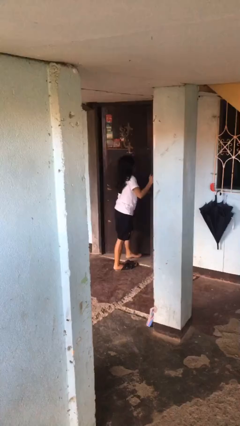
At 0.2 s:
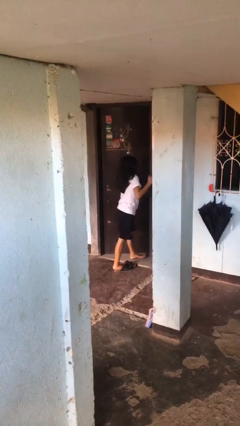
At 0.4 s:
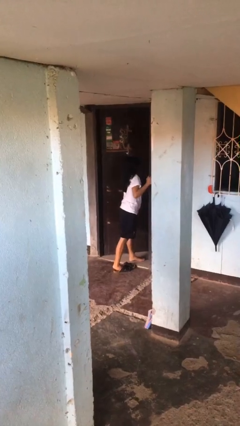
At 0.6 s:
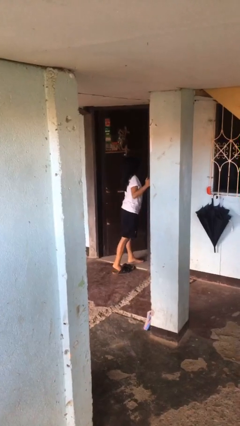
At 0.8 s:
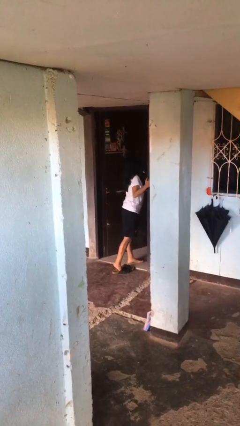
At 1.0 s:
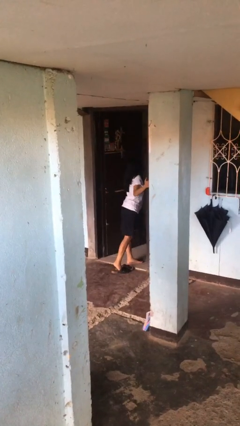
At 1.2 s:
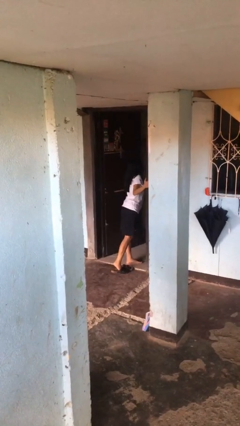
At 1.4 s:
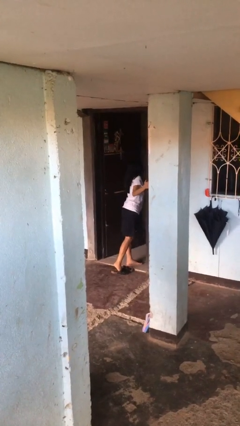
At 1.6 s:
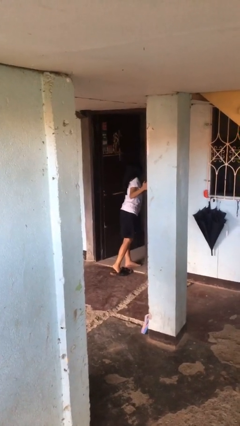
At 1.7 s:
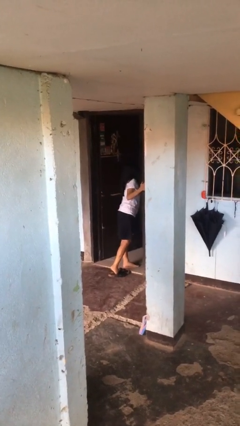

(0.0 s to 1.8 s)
person opens facility door

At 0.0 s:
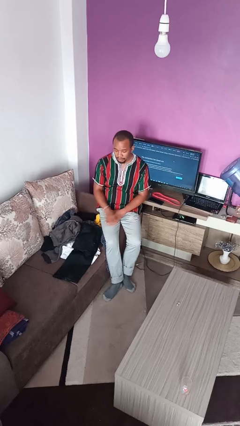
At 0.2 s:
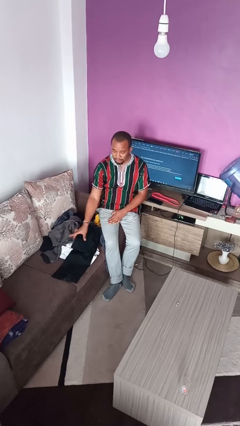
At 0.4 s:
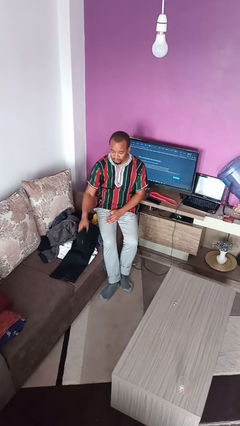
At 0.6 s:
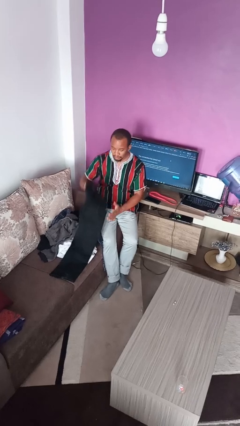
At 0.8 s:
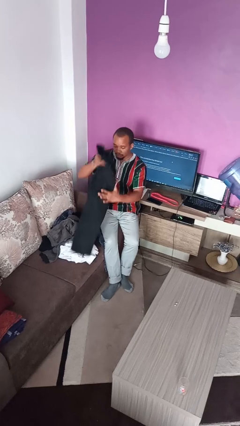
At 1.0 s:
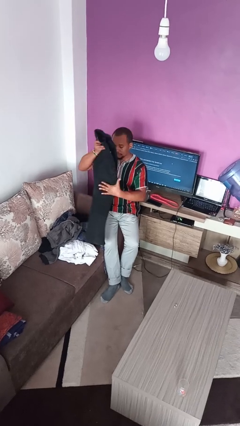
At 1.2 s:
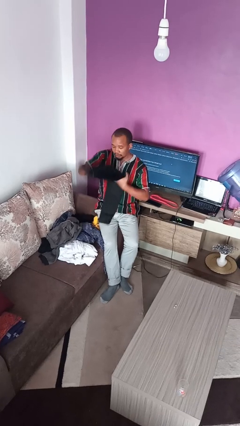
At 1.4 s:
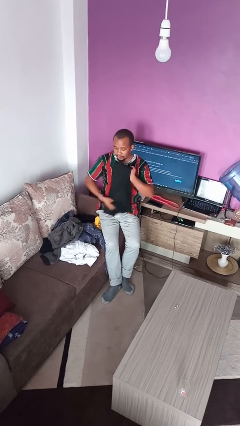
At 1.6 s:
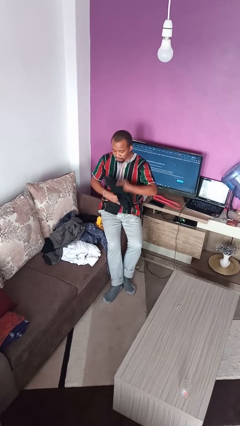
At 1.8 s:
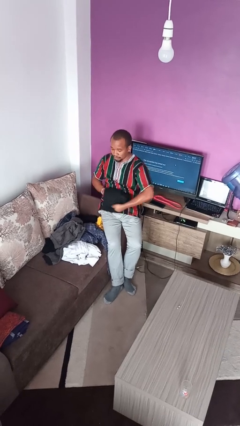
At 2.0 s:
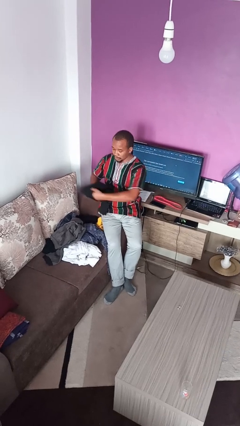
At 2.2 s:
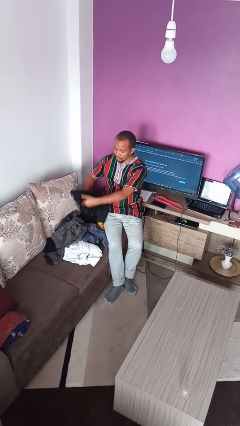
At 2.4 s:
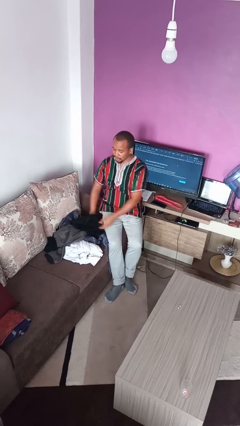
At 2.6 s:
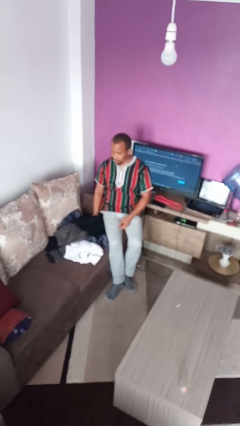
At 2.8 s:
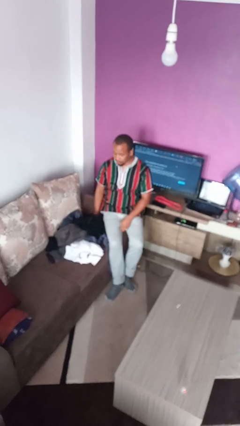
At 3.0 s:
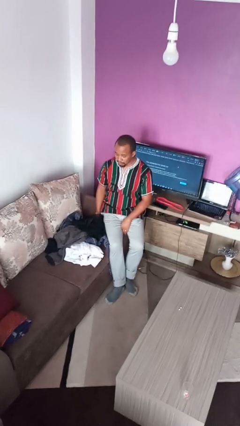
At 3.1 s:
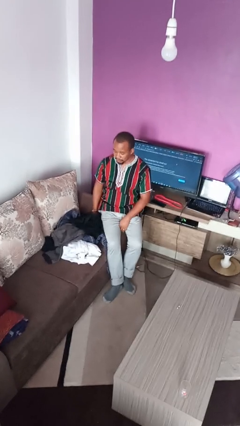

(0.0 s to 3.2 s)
person folds pants

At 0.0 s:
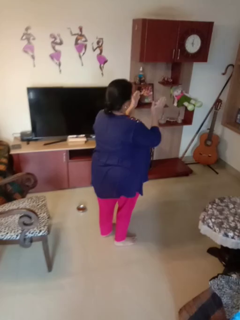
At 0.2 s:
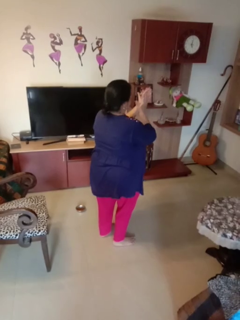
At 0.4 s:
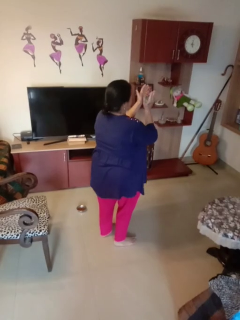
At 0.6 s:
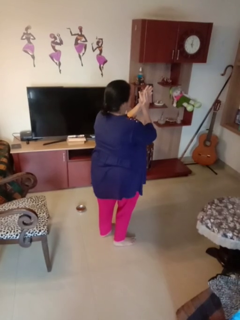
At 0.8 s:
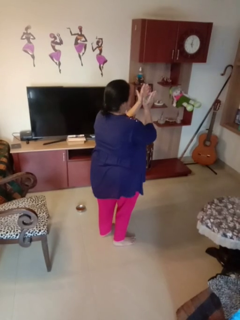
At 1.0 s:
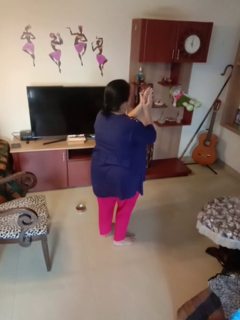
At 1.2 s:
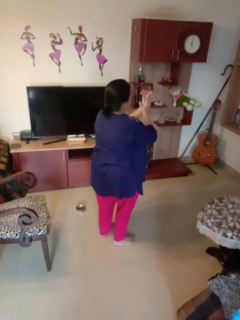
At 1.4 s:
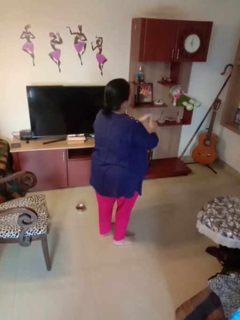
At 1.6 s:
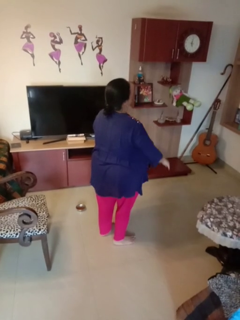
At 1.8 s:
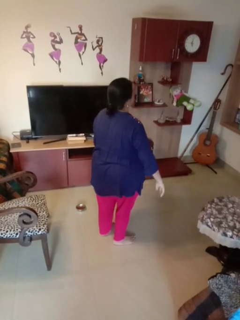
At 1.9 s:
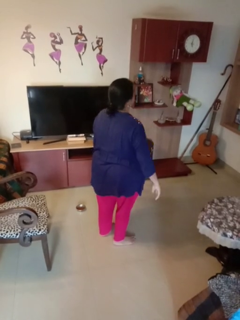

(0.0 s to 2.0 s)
person claps hands

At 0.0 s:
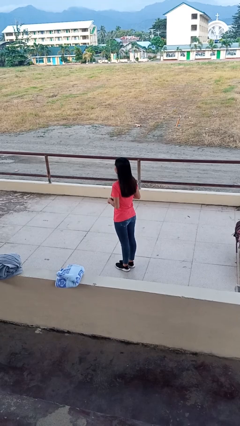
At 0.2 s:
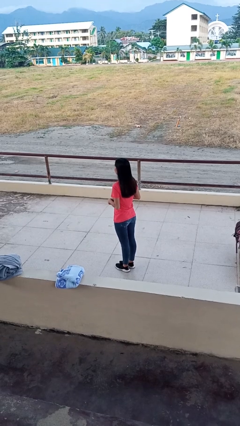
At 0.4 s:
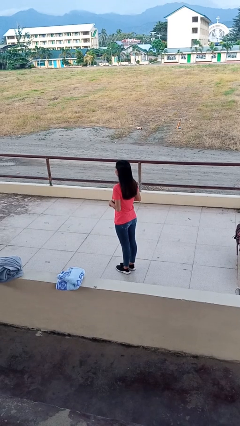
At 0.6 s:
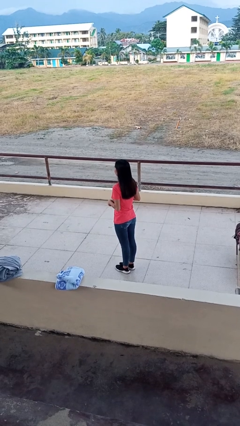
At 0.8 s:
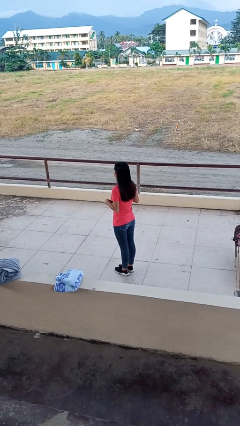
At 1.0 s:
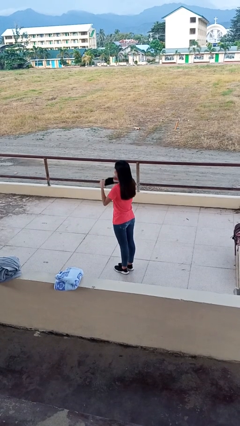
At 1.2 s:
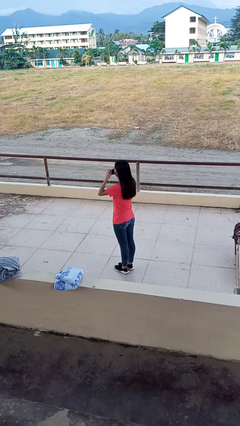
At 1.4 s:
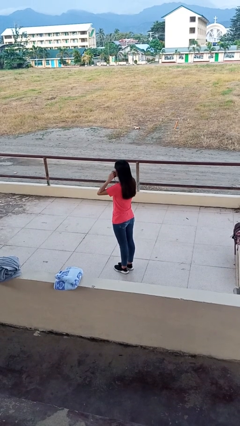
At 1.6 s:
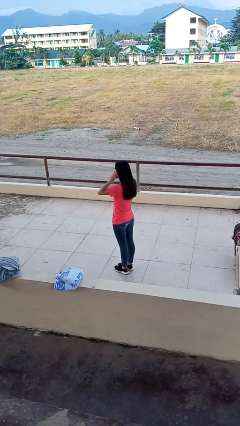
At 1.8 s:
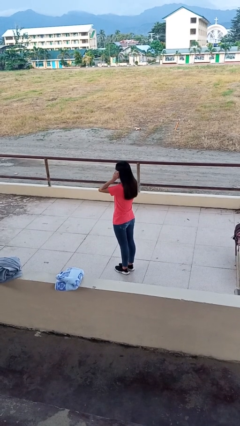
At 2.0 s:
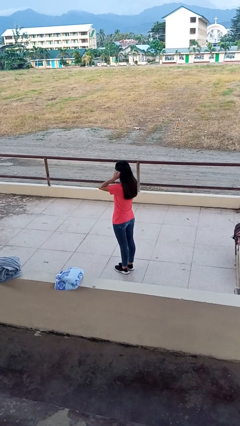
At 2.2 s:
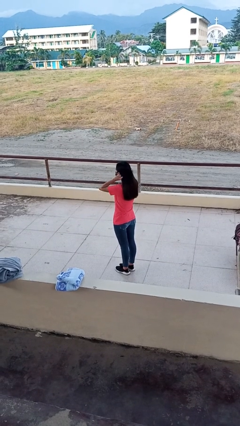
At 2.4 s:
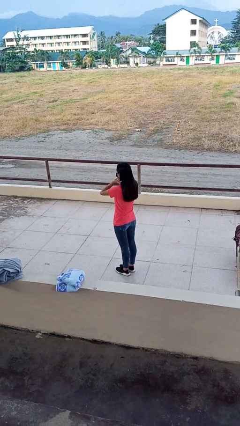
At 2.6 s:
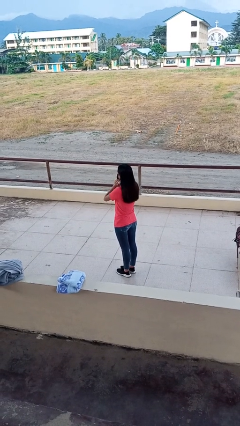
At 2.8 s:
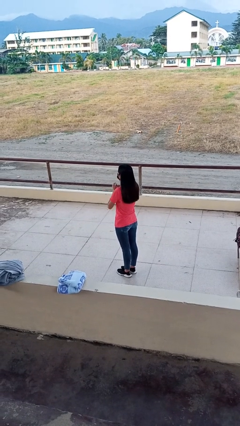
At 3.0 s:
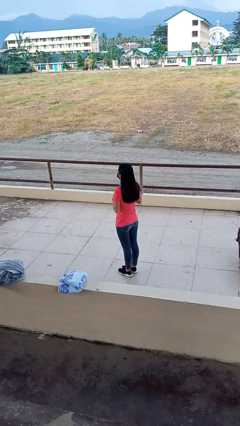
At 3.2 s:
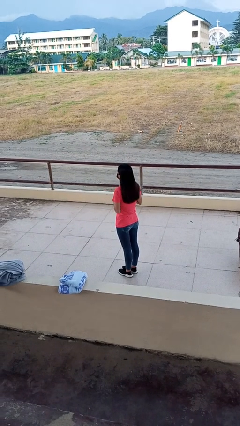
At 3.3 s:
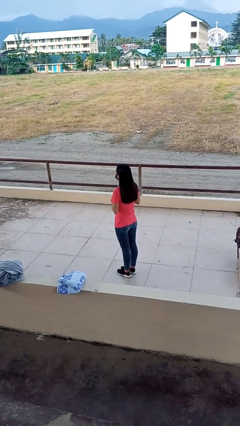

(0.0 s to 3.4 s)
person puts on facemask

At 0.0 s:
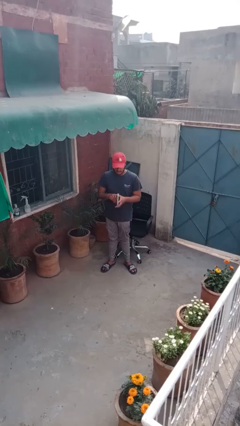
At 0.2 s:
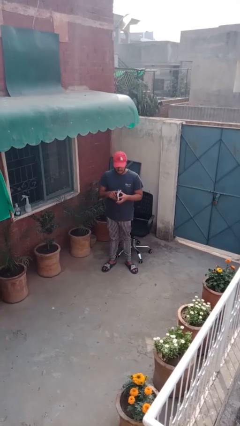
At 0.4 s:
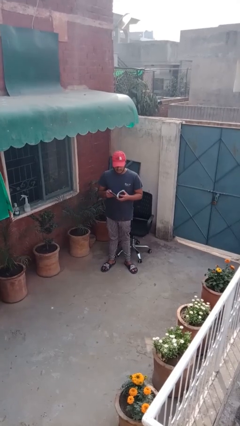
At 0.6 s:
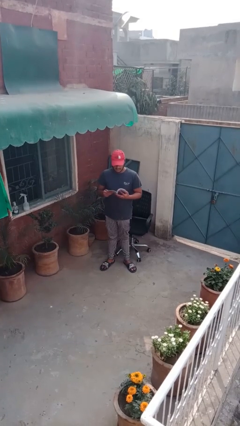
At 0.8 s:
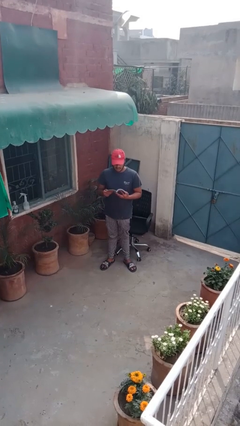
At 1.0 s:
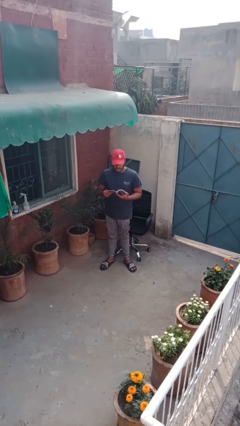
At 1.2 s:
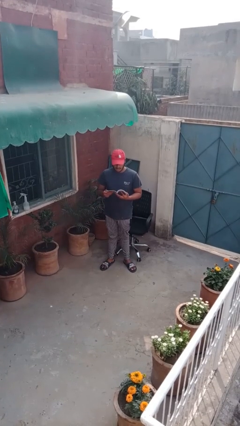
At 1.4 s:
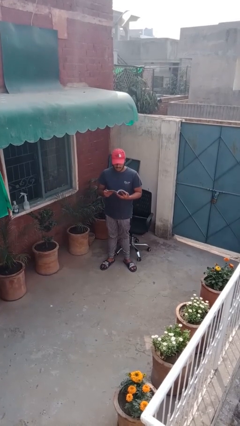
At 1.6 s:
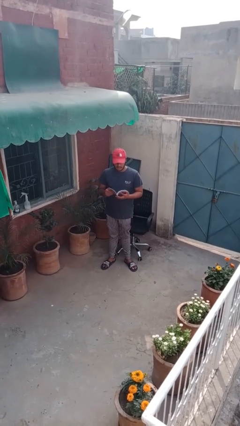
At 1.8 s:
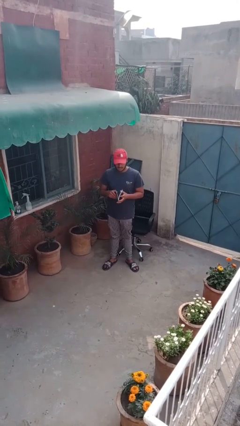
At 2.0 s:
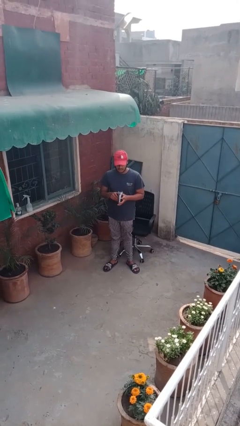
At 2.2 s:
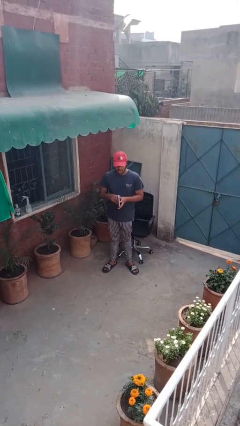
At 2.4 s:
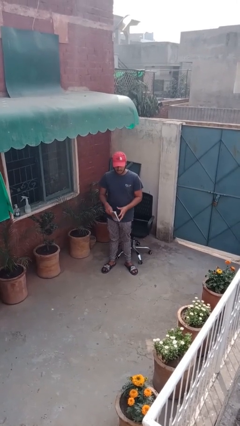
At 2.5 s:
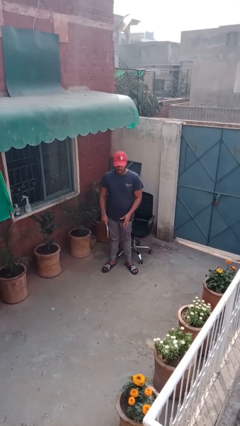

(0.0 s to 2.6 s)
person reads document

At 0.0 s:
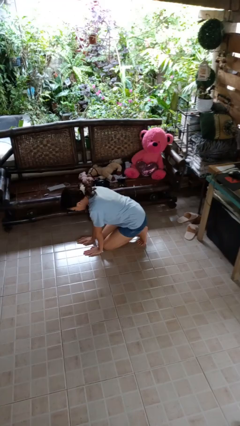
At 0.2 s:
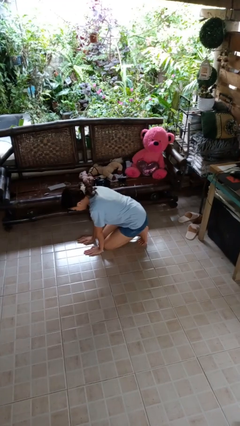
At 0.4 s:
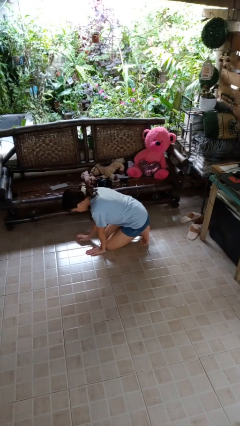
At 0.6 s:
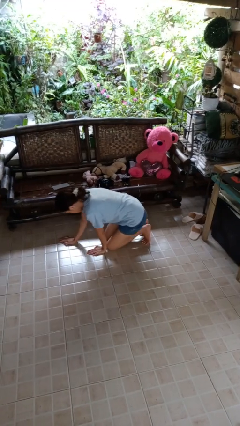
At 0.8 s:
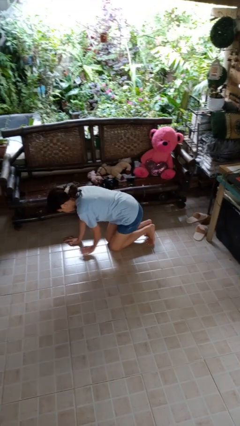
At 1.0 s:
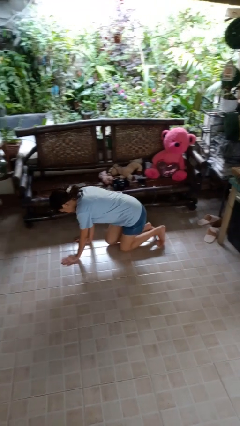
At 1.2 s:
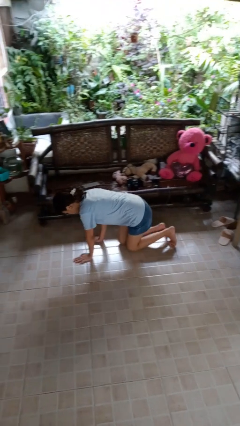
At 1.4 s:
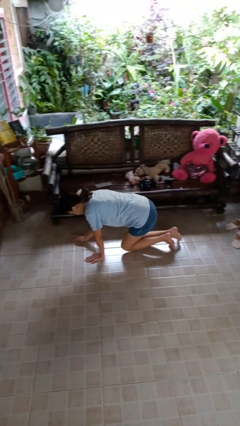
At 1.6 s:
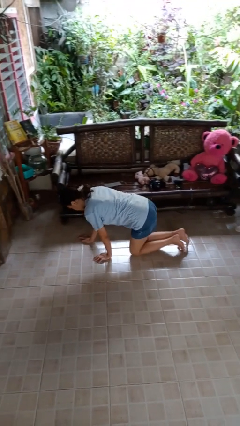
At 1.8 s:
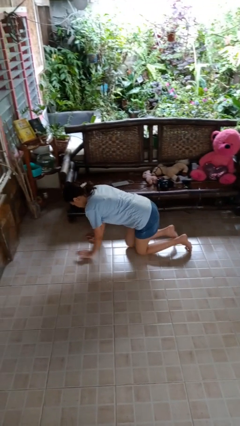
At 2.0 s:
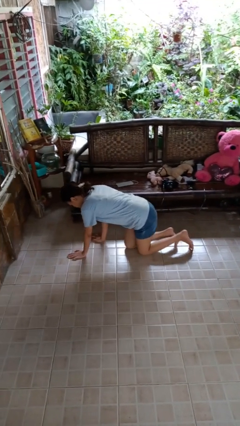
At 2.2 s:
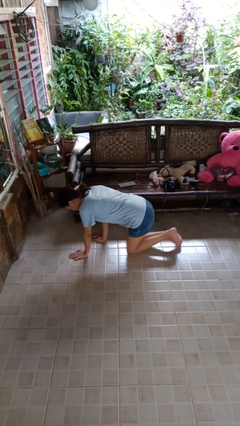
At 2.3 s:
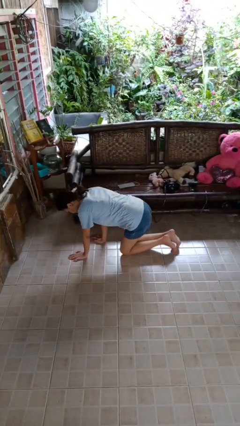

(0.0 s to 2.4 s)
person crawls

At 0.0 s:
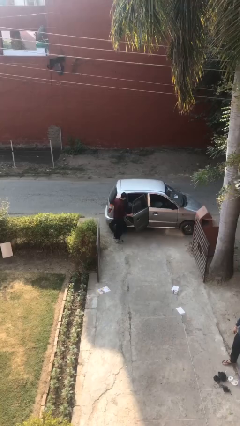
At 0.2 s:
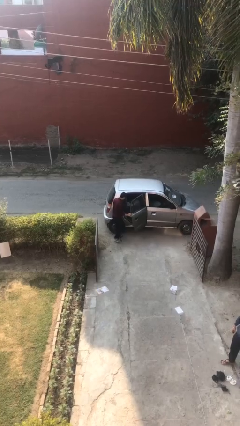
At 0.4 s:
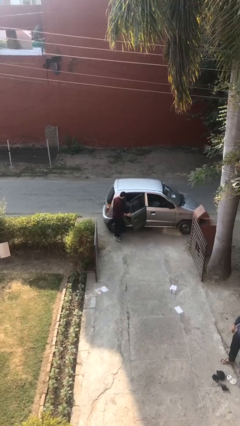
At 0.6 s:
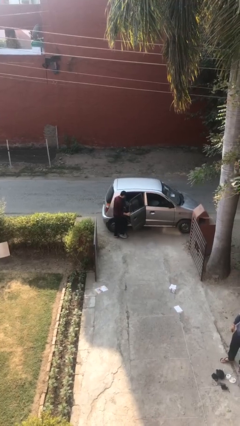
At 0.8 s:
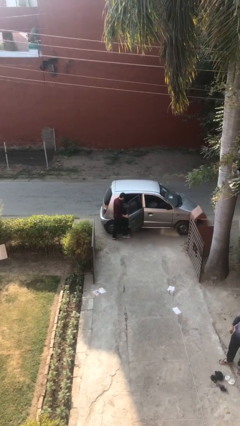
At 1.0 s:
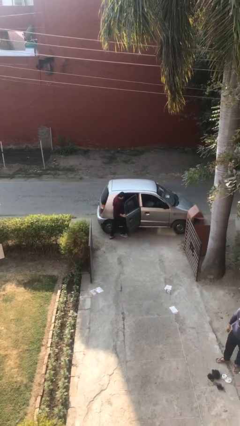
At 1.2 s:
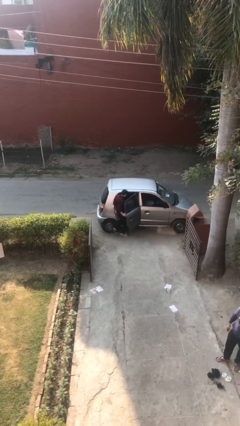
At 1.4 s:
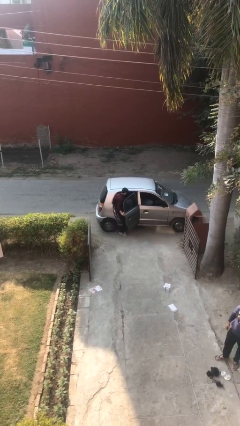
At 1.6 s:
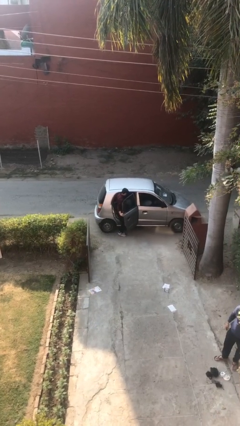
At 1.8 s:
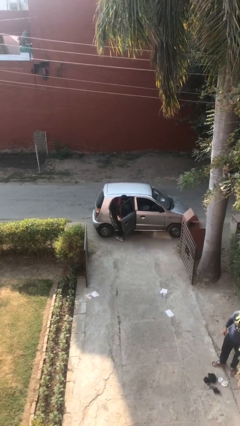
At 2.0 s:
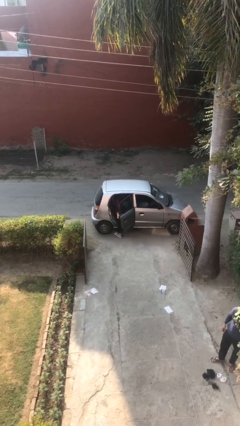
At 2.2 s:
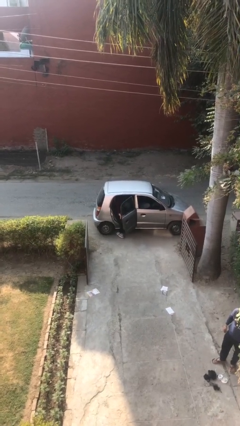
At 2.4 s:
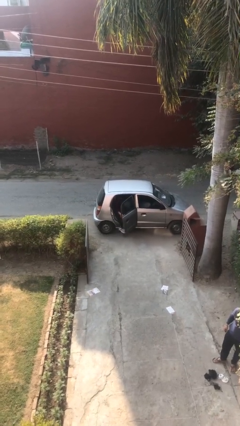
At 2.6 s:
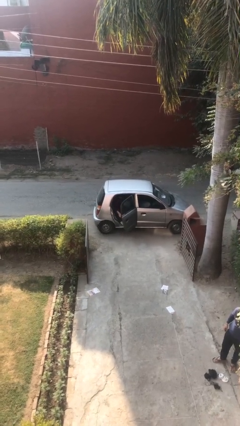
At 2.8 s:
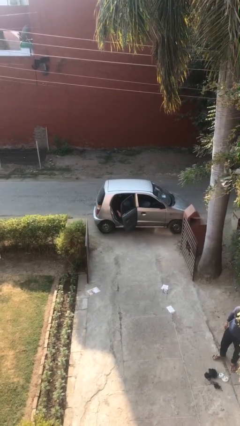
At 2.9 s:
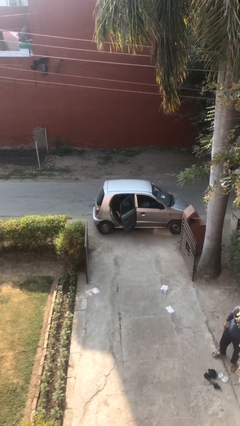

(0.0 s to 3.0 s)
person enters car
